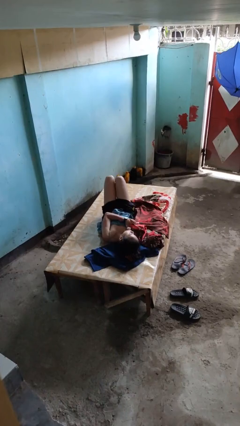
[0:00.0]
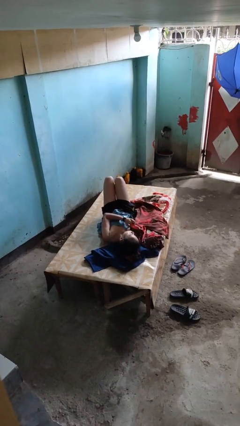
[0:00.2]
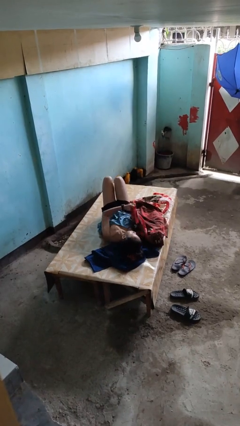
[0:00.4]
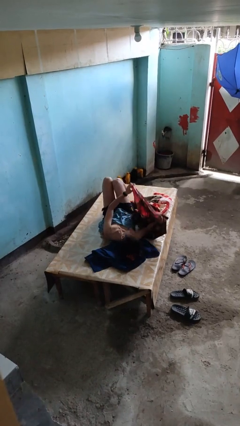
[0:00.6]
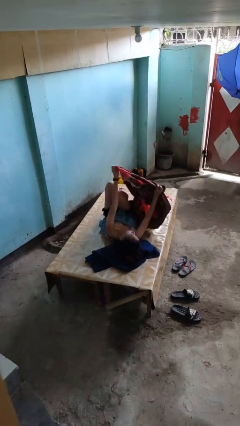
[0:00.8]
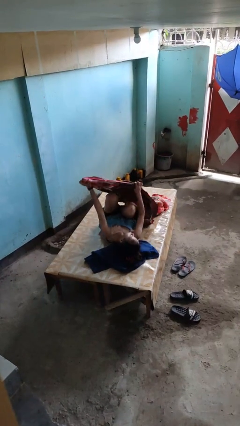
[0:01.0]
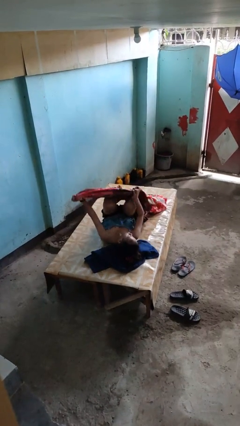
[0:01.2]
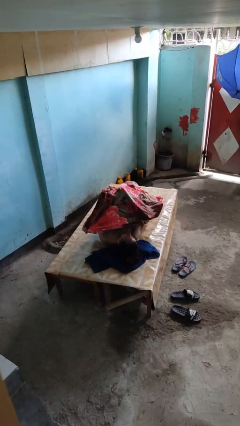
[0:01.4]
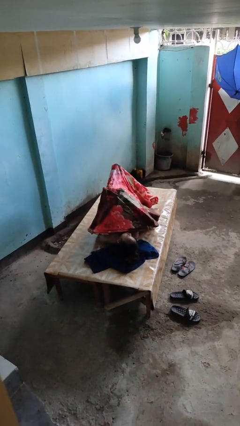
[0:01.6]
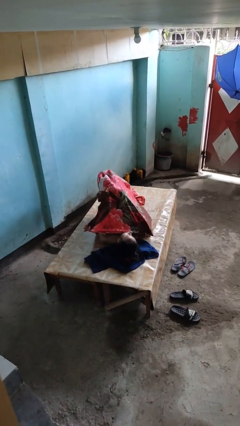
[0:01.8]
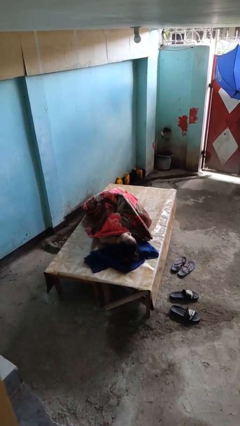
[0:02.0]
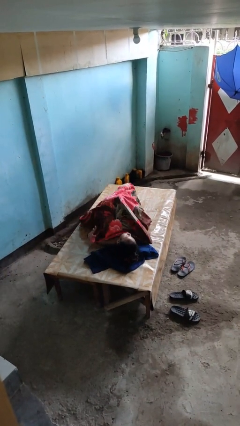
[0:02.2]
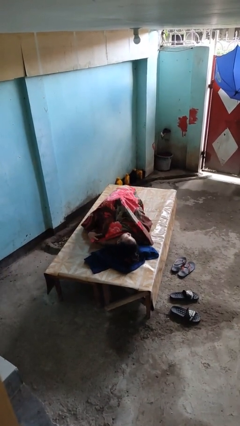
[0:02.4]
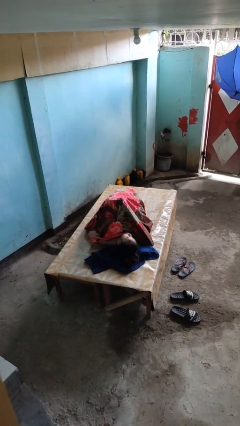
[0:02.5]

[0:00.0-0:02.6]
person covers with blanket

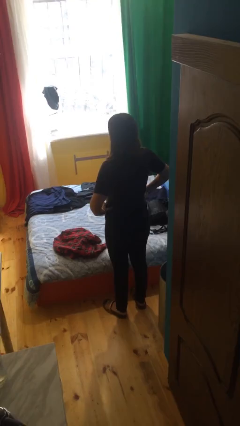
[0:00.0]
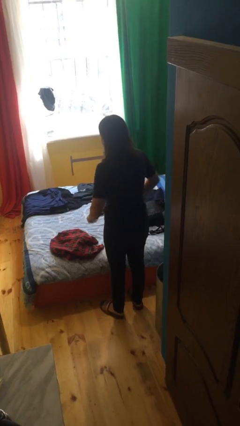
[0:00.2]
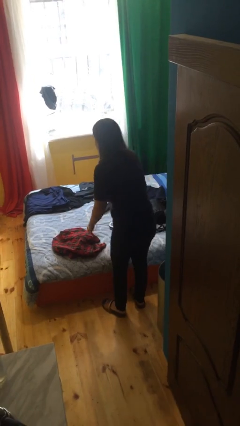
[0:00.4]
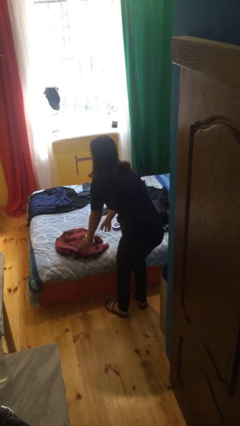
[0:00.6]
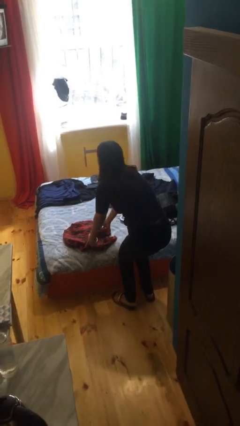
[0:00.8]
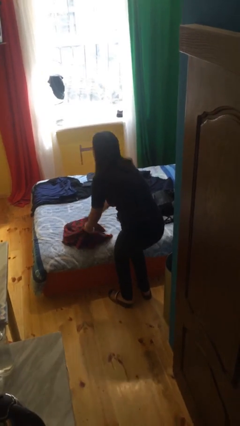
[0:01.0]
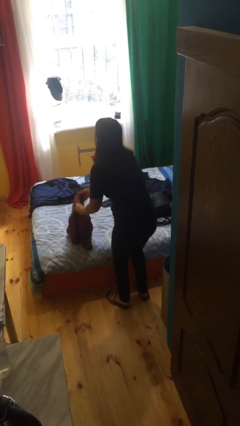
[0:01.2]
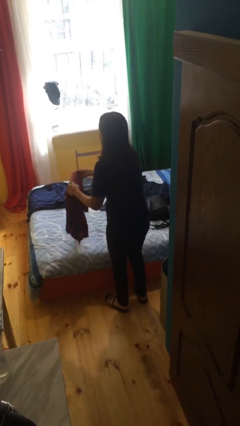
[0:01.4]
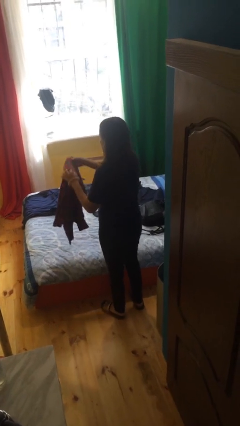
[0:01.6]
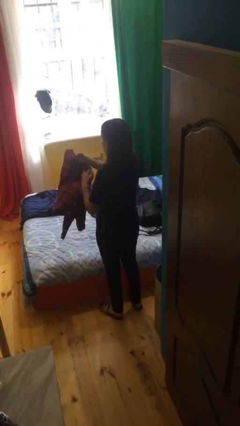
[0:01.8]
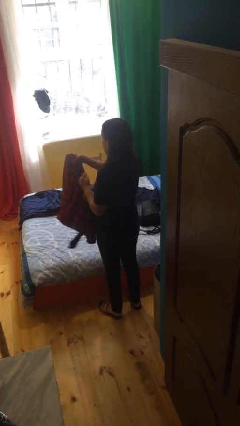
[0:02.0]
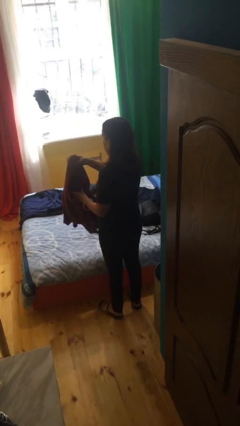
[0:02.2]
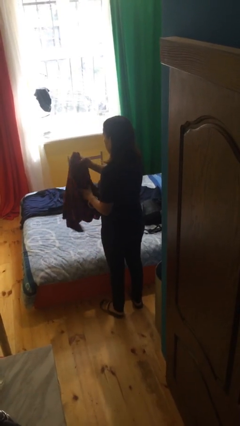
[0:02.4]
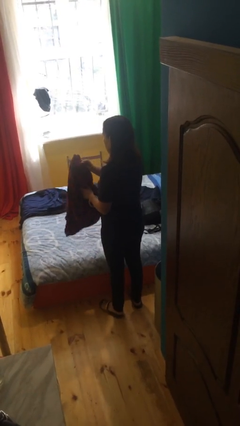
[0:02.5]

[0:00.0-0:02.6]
person picks up object from bed

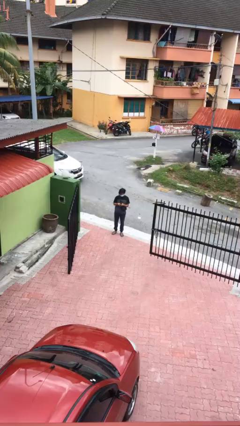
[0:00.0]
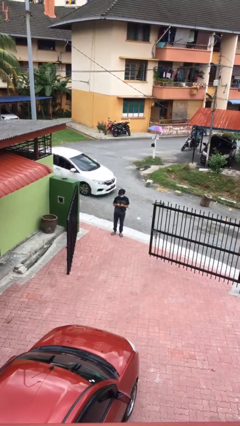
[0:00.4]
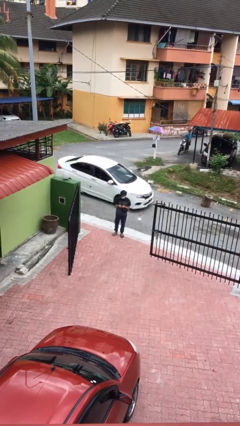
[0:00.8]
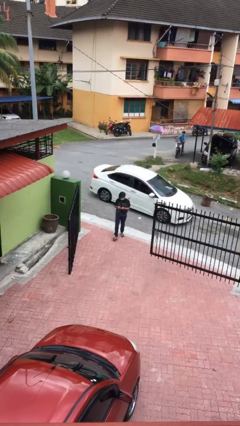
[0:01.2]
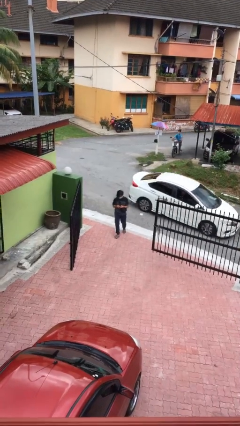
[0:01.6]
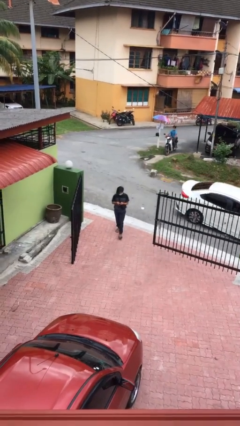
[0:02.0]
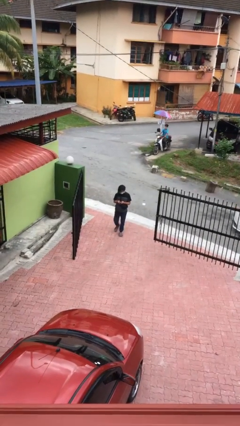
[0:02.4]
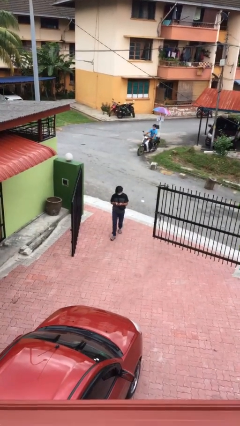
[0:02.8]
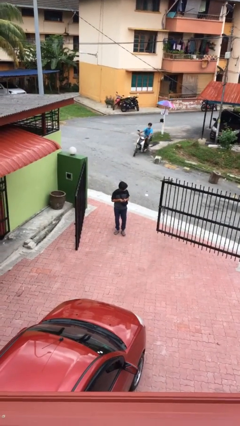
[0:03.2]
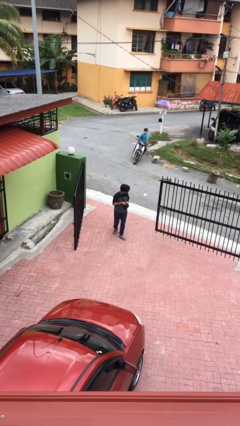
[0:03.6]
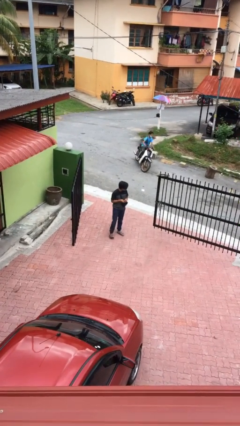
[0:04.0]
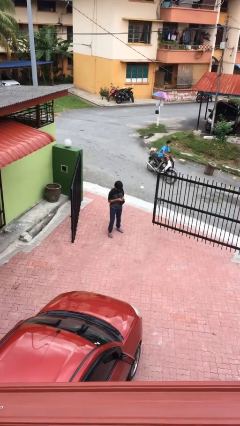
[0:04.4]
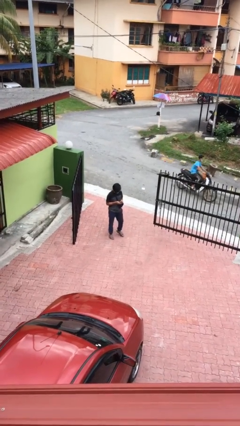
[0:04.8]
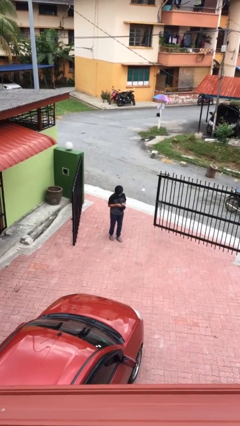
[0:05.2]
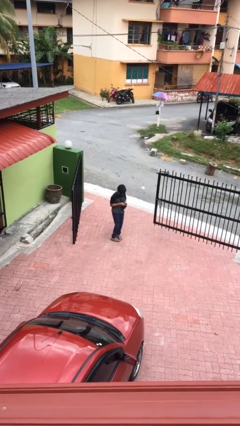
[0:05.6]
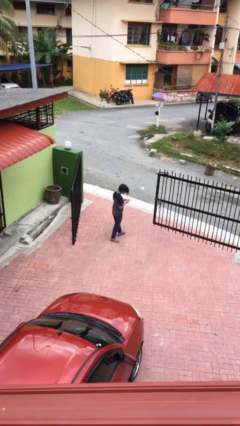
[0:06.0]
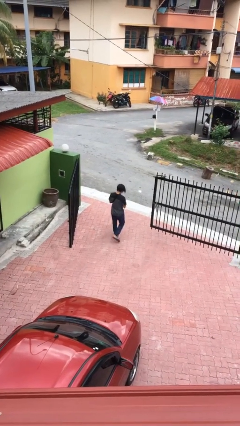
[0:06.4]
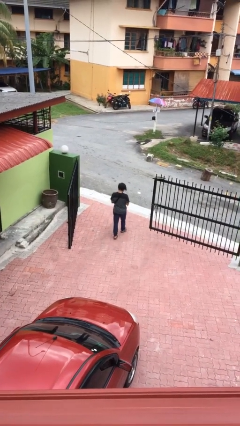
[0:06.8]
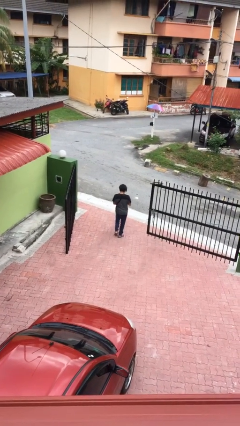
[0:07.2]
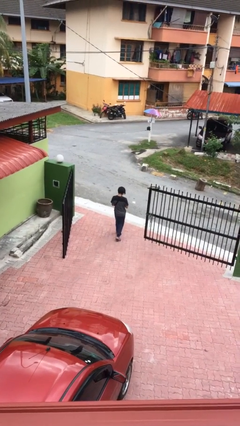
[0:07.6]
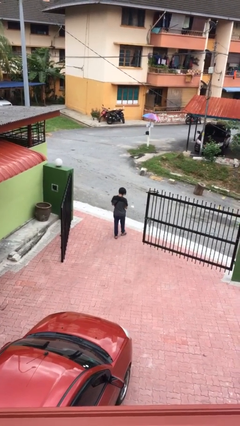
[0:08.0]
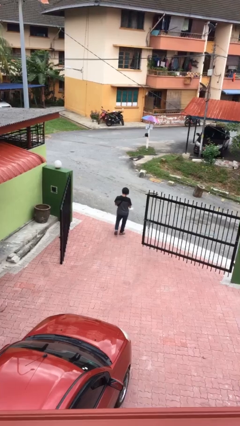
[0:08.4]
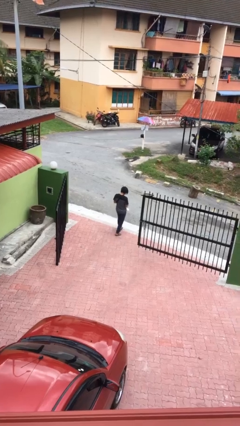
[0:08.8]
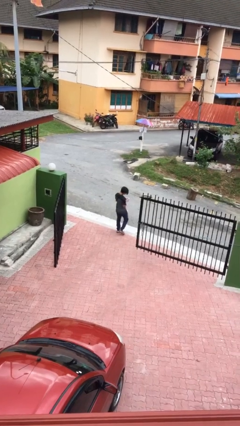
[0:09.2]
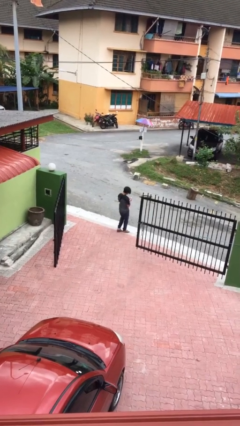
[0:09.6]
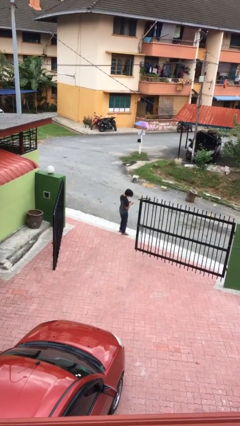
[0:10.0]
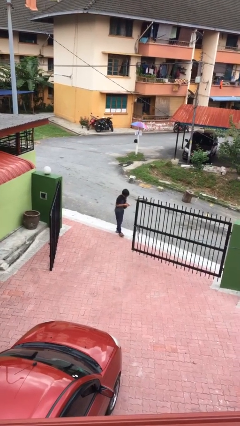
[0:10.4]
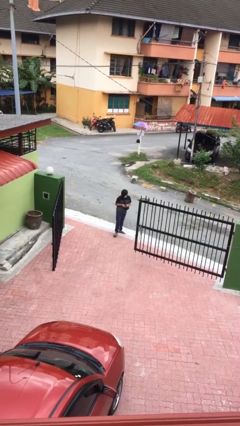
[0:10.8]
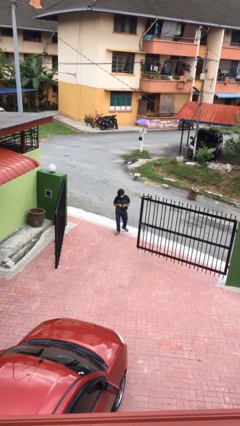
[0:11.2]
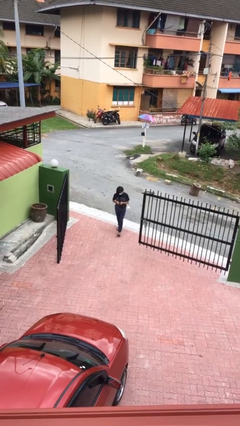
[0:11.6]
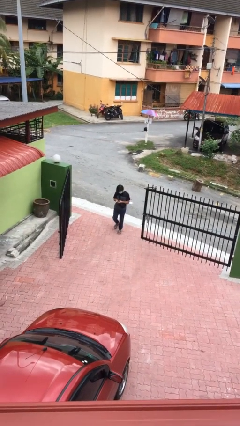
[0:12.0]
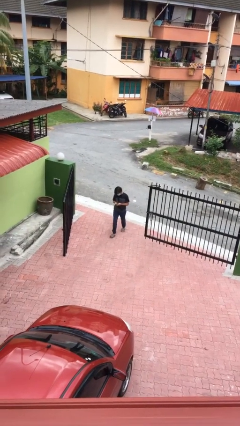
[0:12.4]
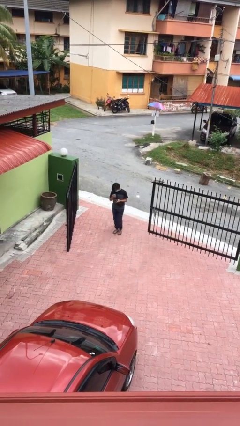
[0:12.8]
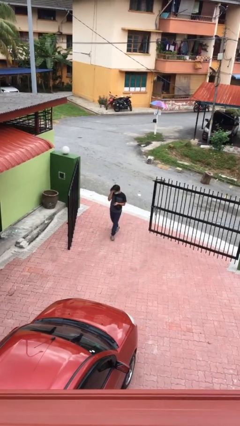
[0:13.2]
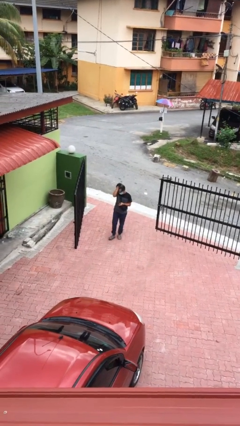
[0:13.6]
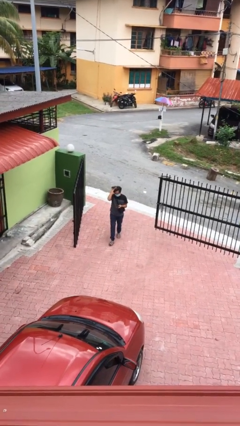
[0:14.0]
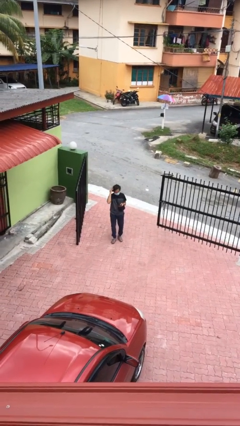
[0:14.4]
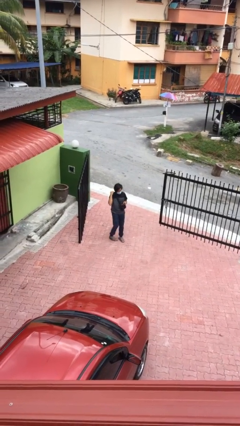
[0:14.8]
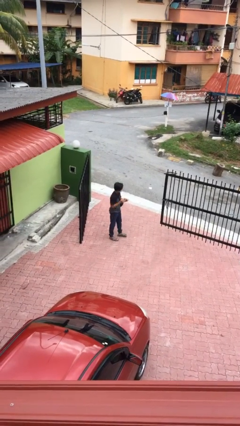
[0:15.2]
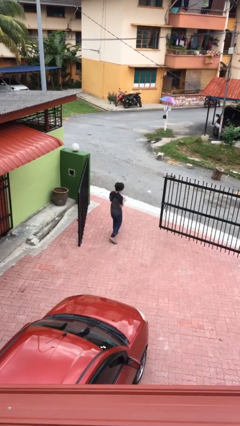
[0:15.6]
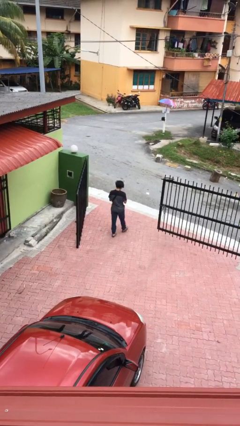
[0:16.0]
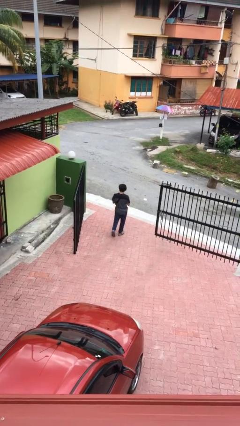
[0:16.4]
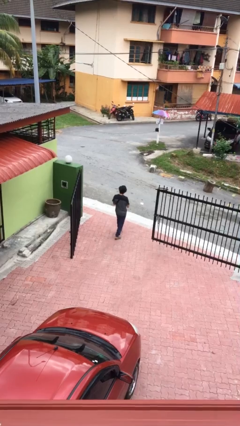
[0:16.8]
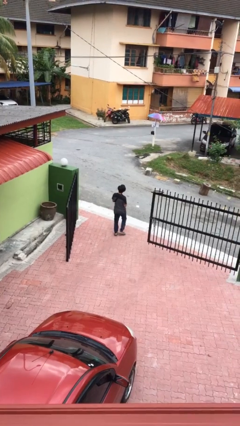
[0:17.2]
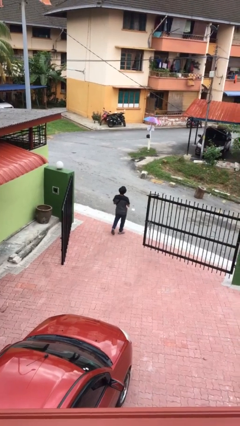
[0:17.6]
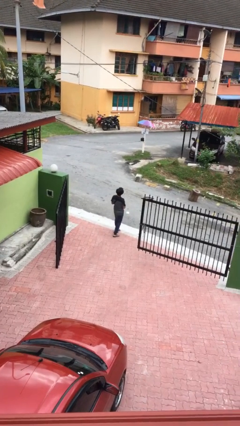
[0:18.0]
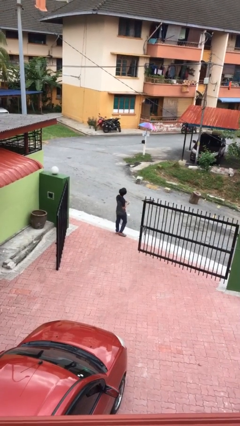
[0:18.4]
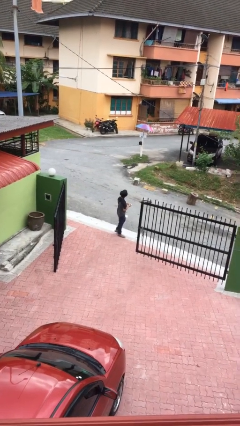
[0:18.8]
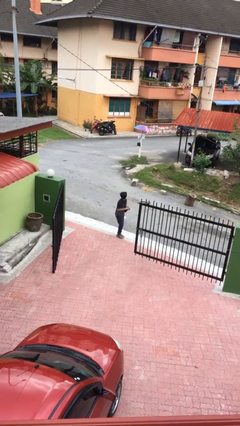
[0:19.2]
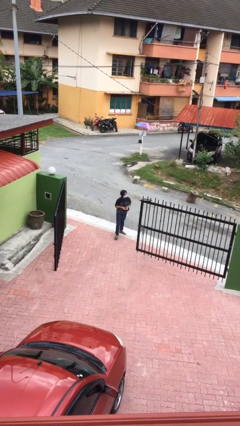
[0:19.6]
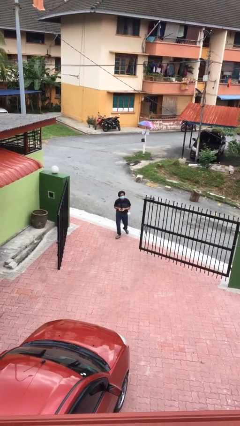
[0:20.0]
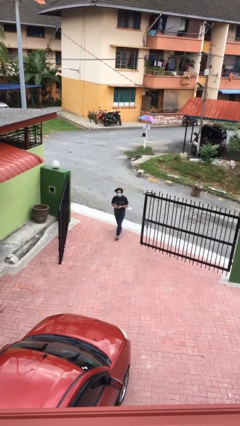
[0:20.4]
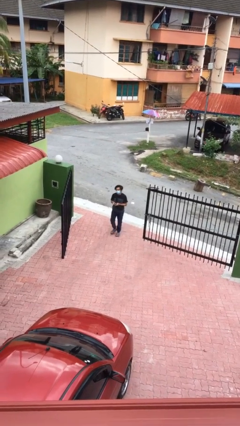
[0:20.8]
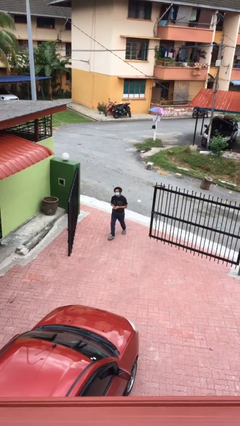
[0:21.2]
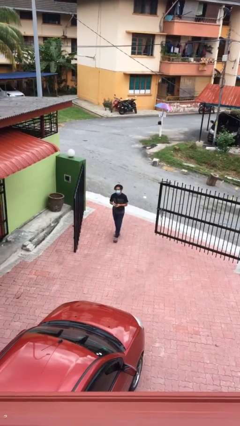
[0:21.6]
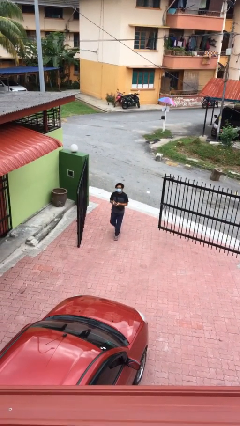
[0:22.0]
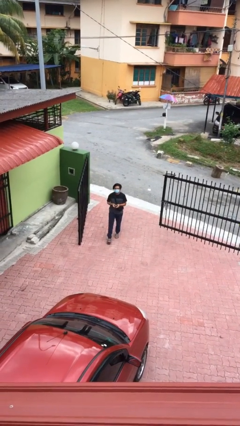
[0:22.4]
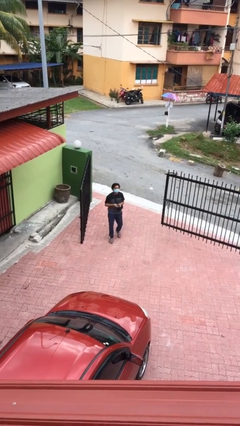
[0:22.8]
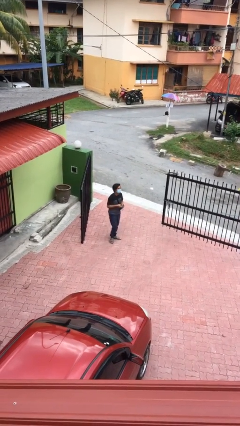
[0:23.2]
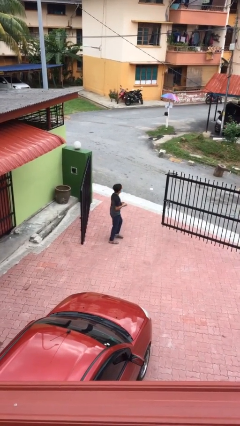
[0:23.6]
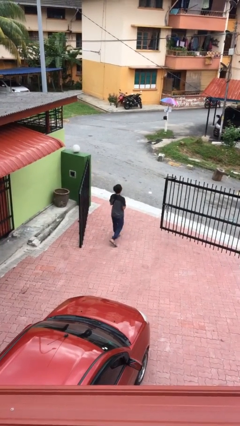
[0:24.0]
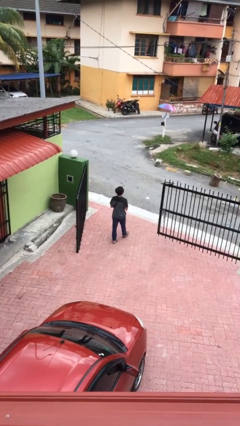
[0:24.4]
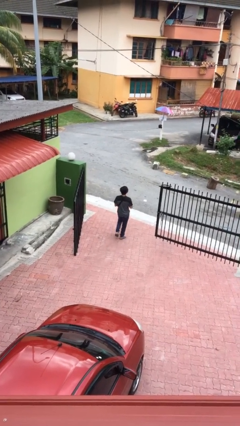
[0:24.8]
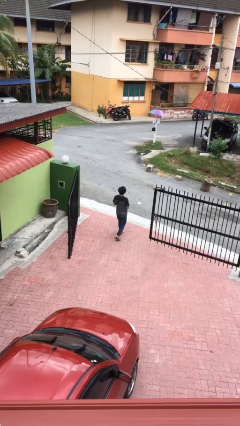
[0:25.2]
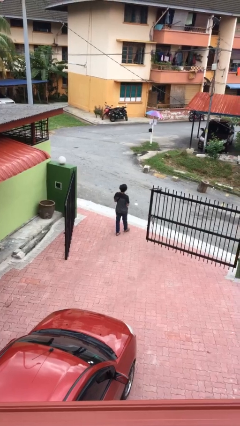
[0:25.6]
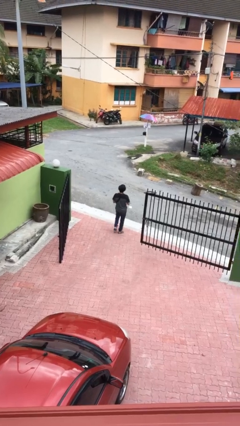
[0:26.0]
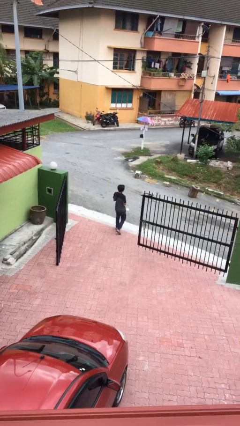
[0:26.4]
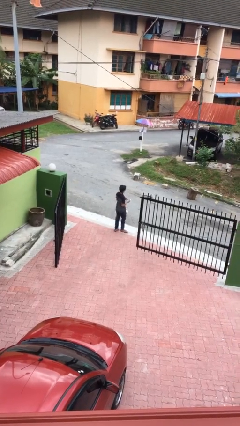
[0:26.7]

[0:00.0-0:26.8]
person texts on phone
